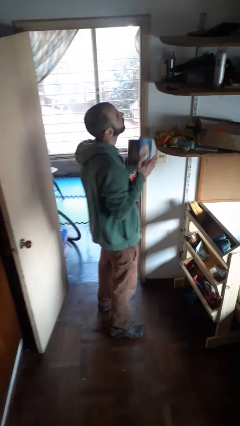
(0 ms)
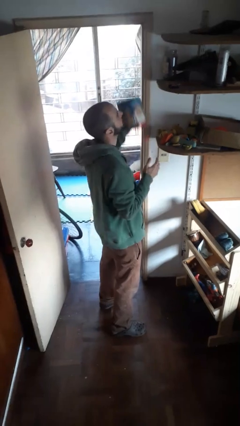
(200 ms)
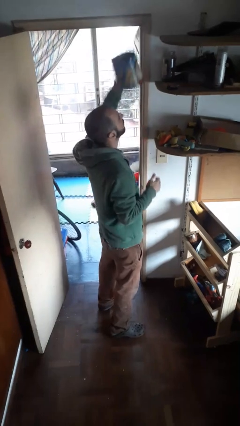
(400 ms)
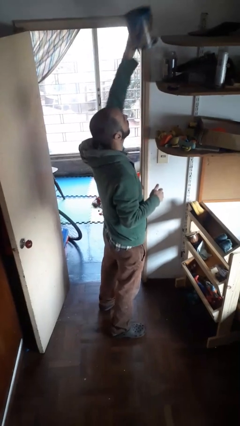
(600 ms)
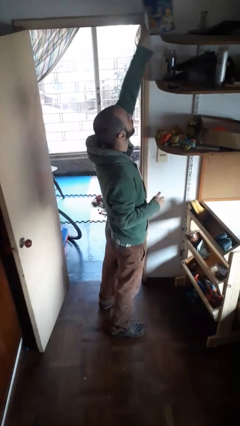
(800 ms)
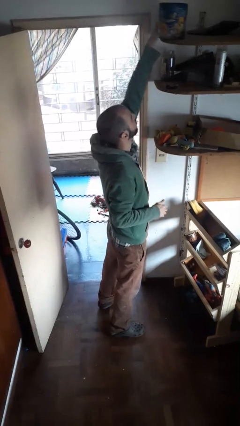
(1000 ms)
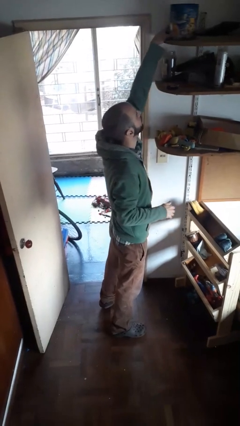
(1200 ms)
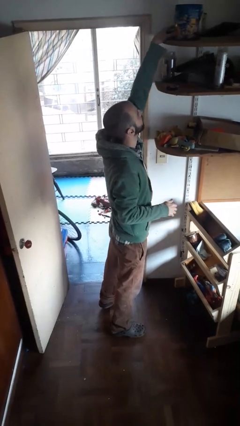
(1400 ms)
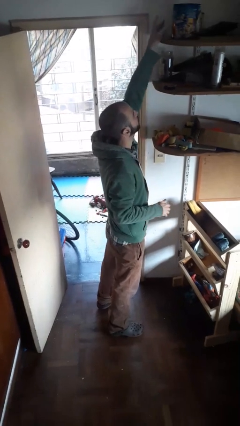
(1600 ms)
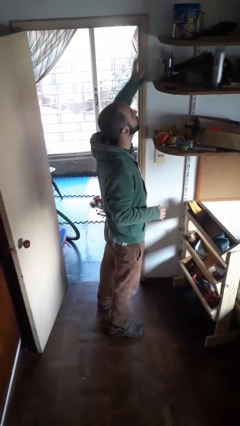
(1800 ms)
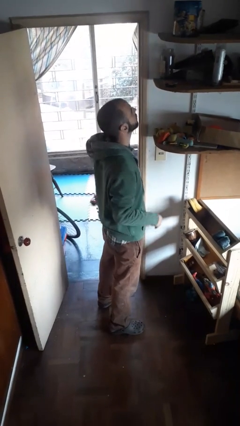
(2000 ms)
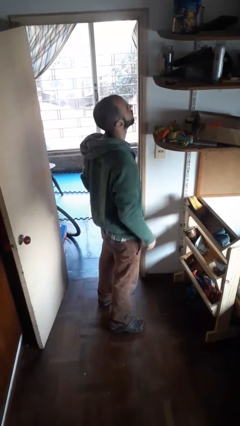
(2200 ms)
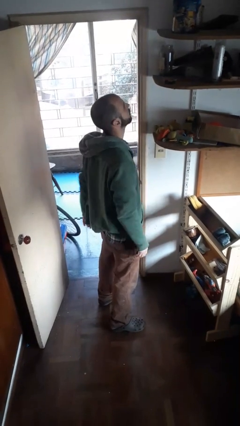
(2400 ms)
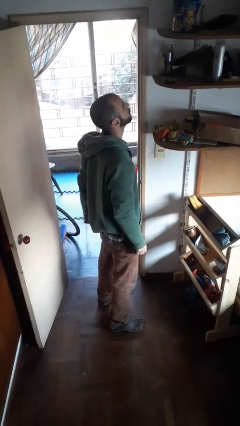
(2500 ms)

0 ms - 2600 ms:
person puts down object on shelf

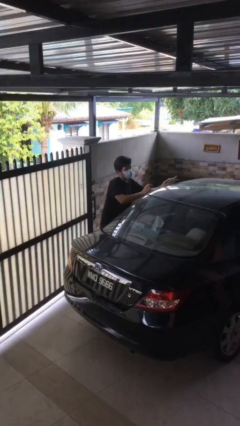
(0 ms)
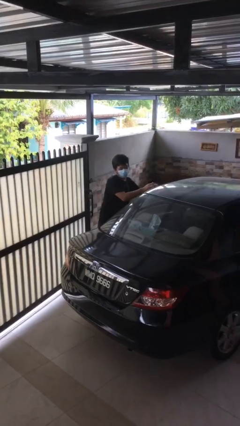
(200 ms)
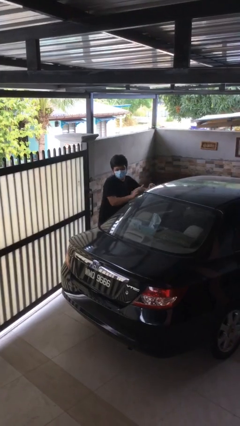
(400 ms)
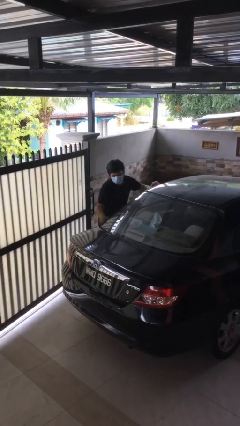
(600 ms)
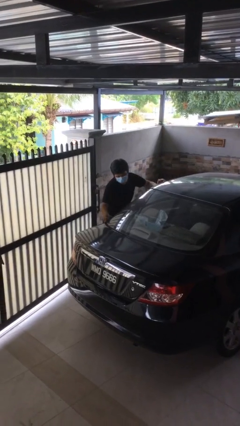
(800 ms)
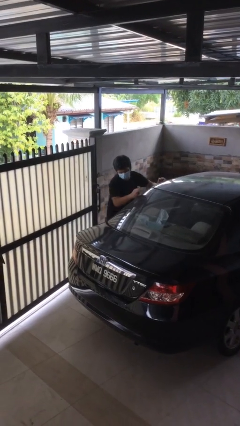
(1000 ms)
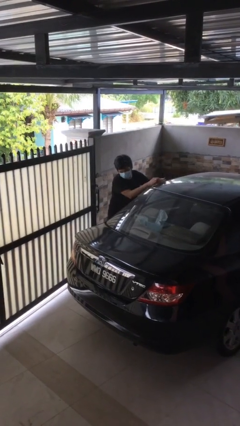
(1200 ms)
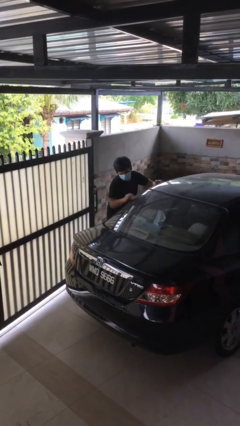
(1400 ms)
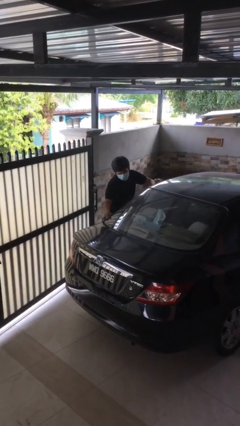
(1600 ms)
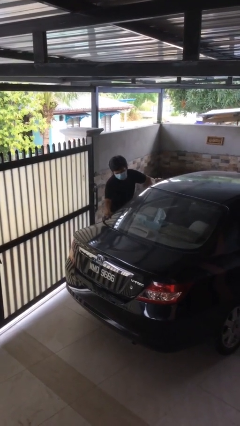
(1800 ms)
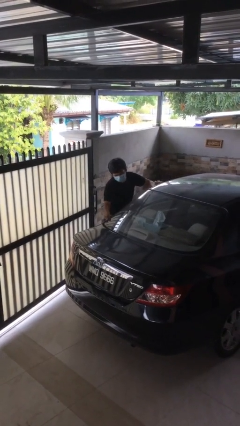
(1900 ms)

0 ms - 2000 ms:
person polishes car with rag

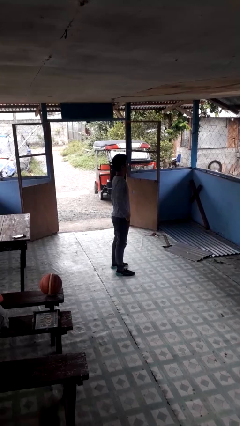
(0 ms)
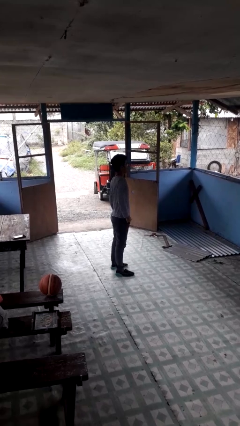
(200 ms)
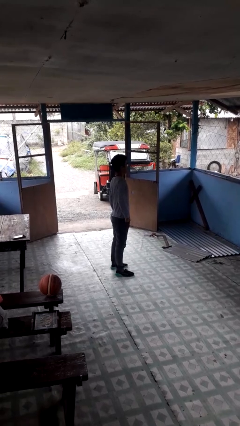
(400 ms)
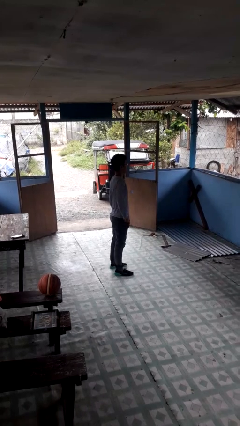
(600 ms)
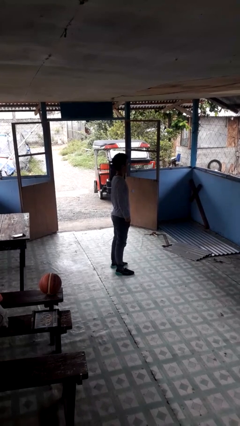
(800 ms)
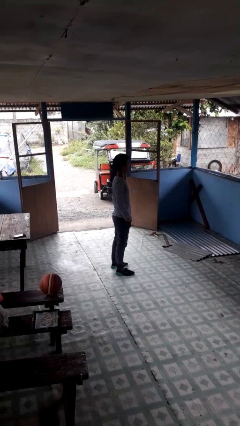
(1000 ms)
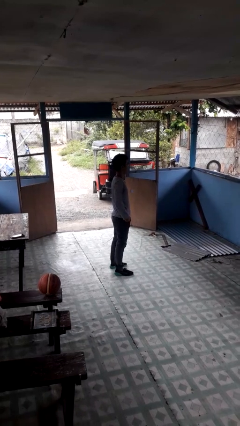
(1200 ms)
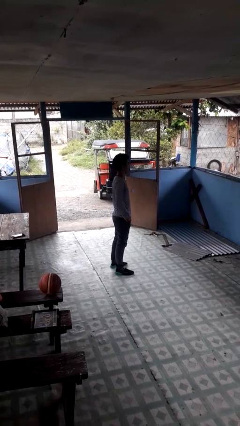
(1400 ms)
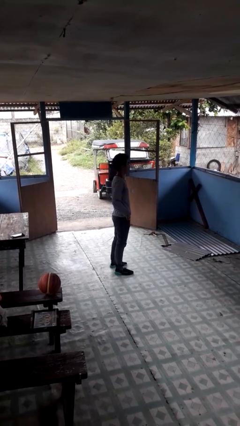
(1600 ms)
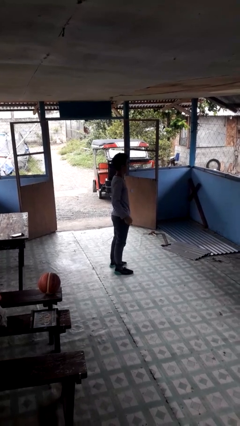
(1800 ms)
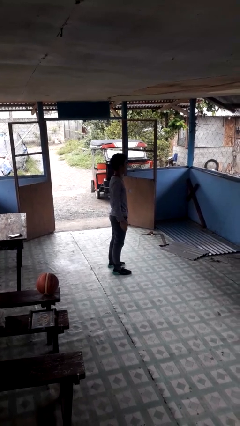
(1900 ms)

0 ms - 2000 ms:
person puts hands in back pockets

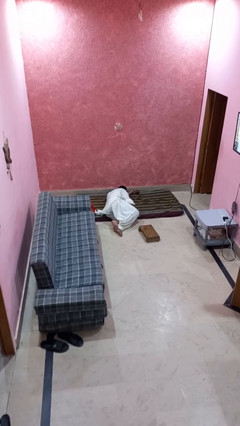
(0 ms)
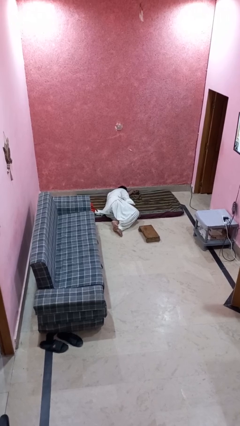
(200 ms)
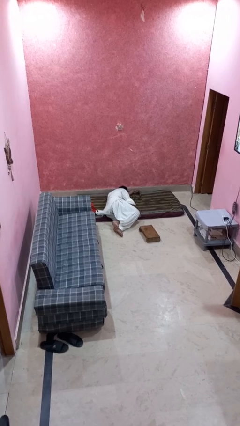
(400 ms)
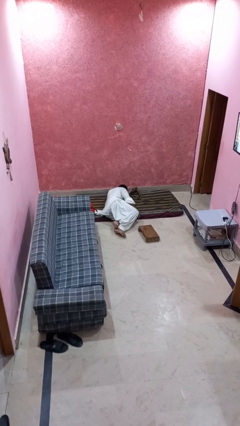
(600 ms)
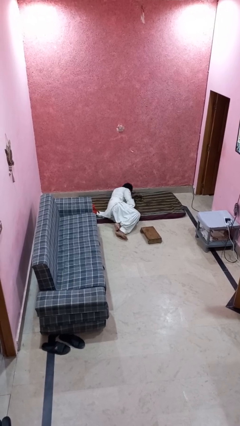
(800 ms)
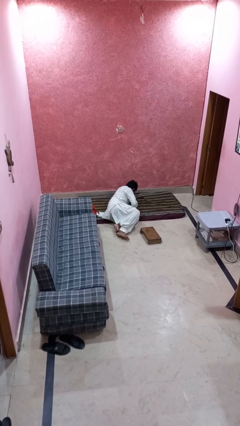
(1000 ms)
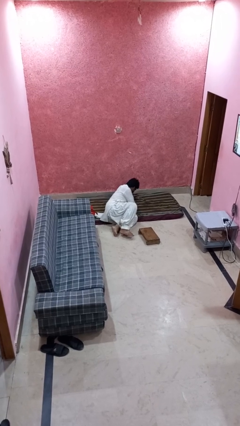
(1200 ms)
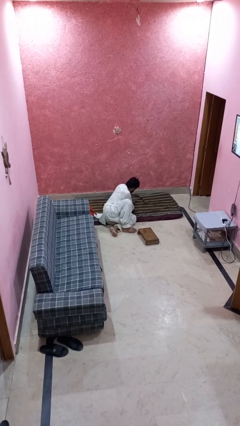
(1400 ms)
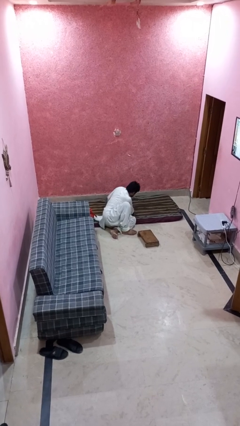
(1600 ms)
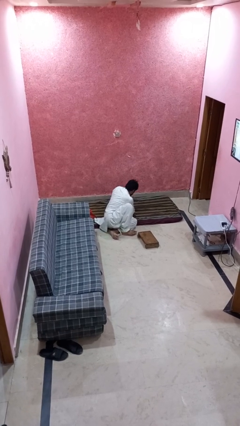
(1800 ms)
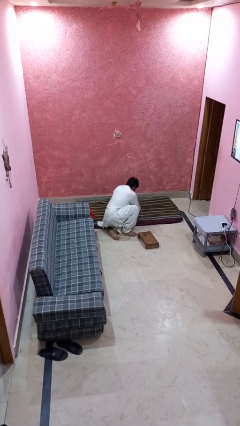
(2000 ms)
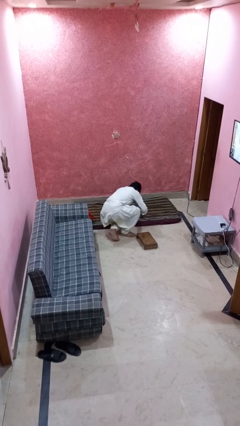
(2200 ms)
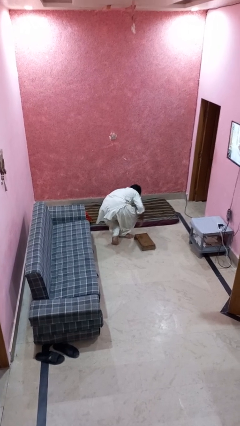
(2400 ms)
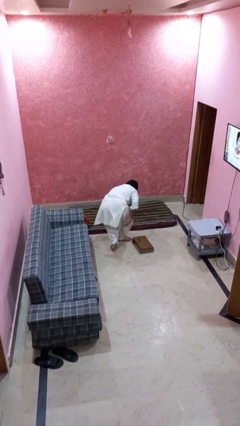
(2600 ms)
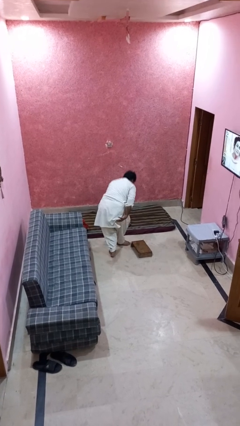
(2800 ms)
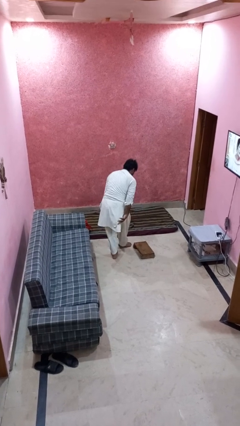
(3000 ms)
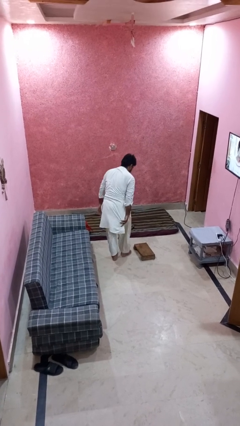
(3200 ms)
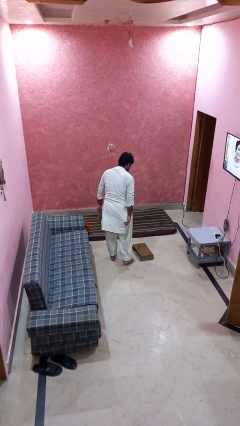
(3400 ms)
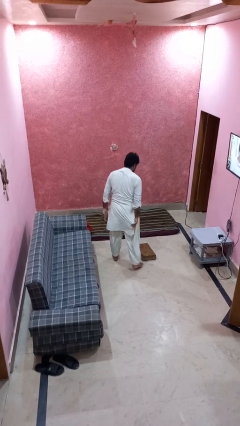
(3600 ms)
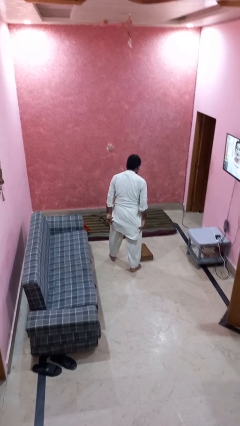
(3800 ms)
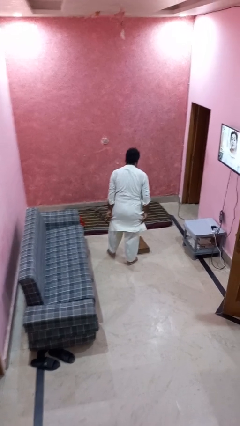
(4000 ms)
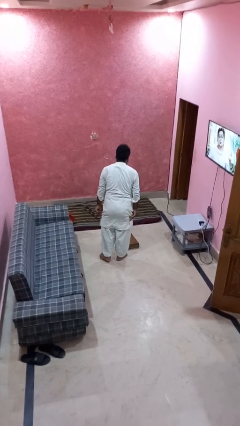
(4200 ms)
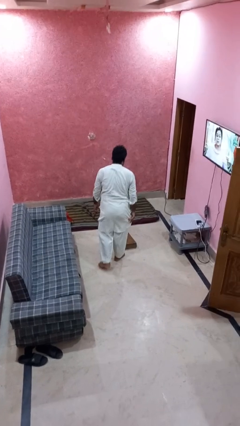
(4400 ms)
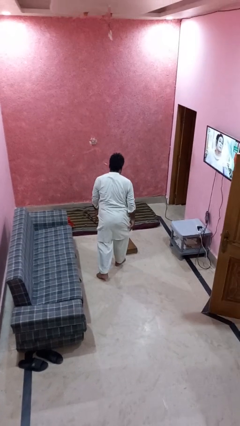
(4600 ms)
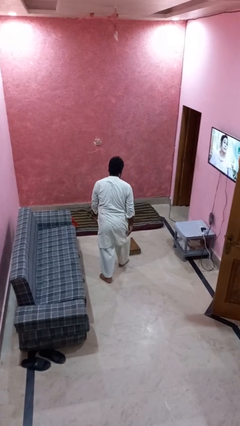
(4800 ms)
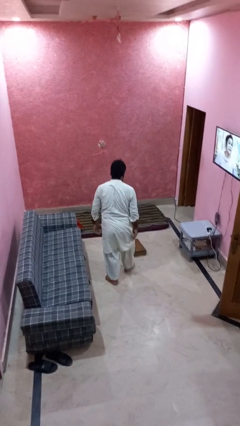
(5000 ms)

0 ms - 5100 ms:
person stands up from floor

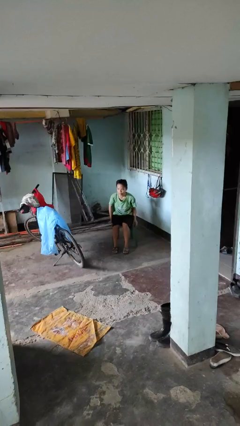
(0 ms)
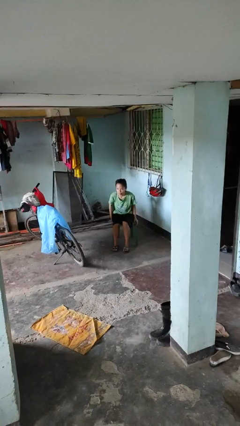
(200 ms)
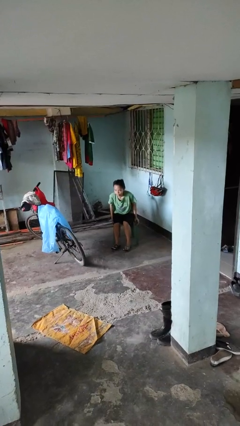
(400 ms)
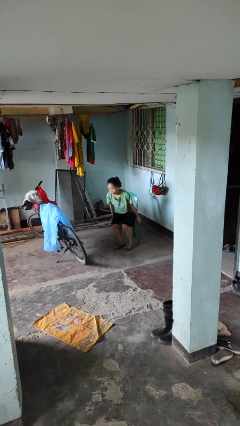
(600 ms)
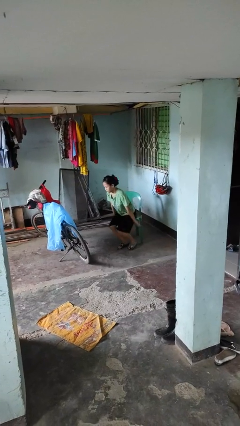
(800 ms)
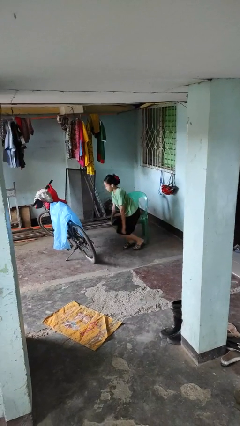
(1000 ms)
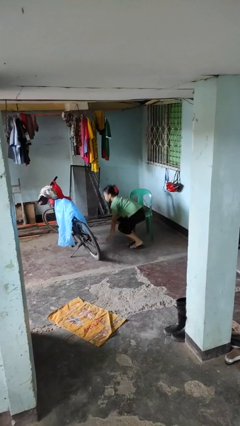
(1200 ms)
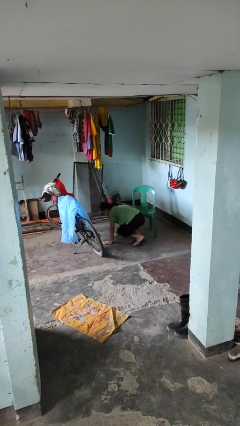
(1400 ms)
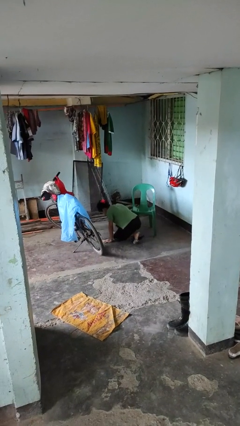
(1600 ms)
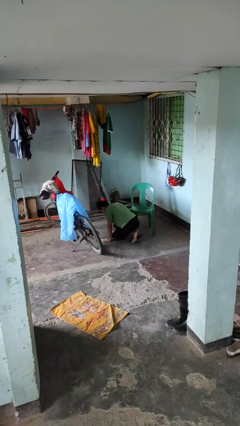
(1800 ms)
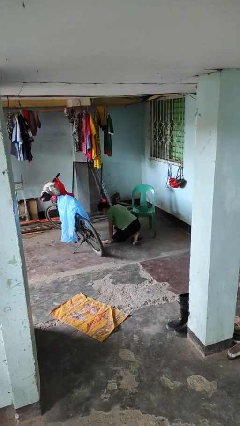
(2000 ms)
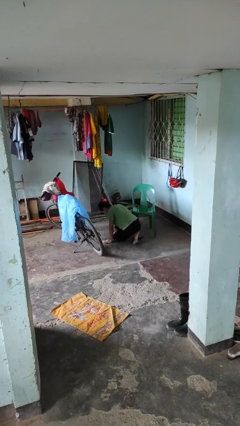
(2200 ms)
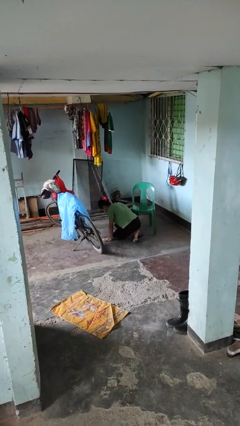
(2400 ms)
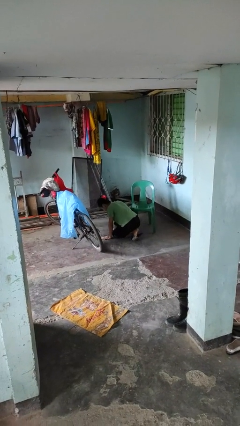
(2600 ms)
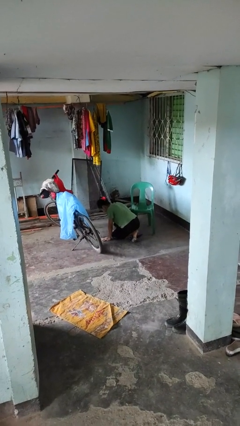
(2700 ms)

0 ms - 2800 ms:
person falls from chair

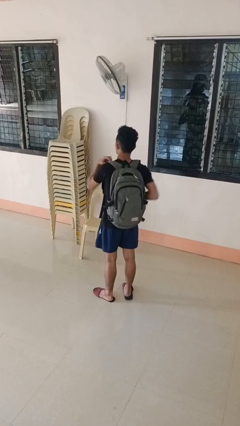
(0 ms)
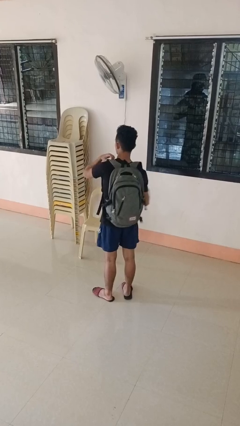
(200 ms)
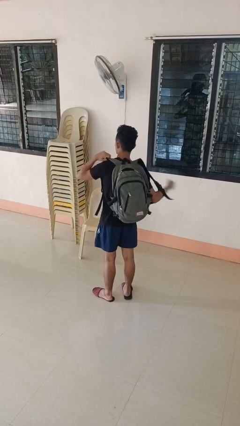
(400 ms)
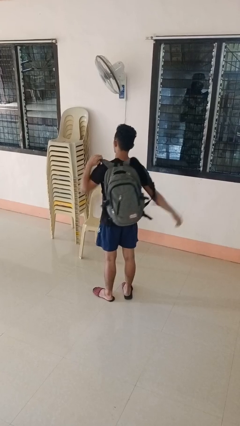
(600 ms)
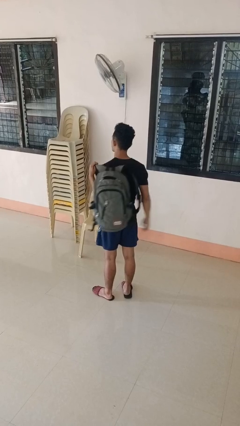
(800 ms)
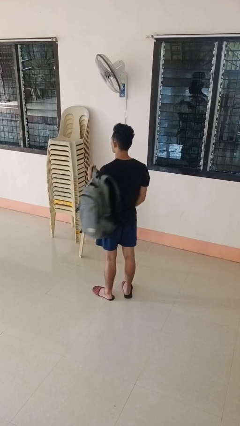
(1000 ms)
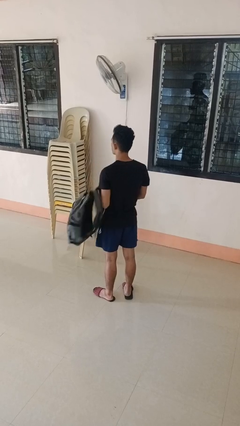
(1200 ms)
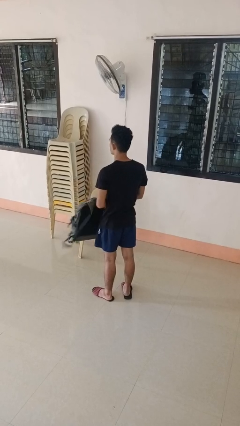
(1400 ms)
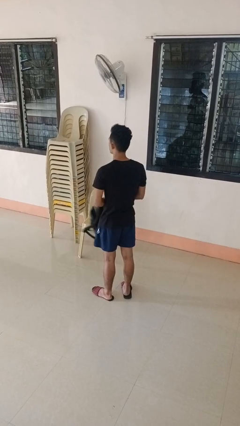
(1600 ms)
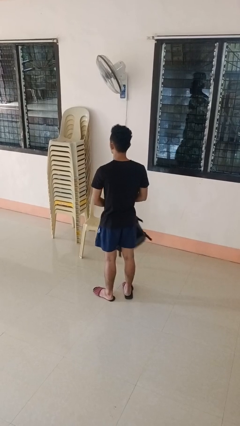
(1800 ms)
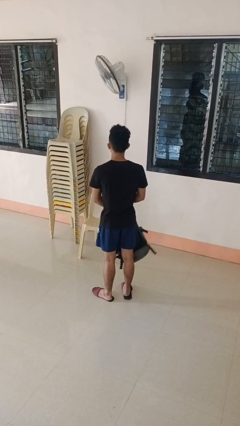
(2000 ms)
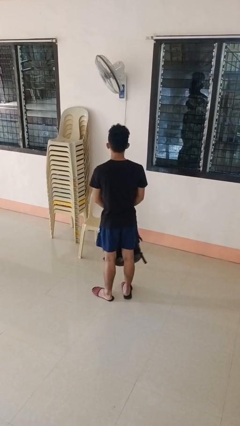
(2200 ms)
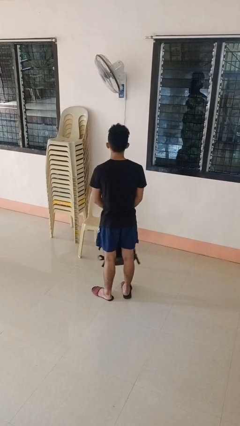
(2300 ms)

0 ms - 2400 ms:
person takes off backpack

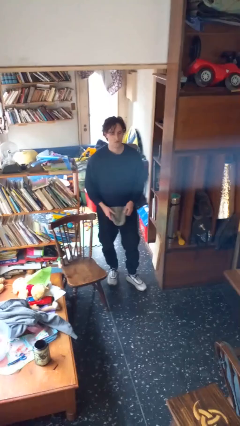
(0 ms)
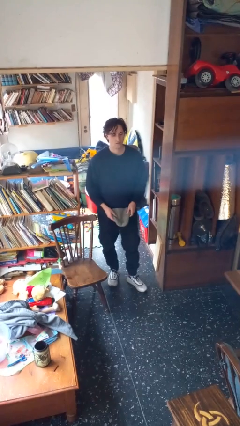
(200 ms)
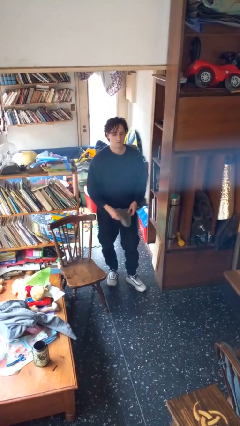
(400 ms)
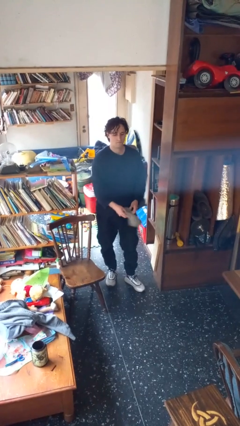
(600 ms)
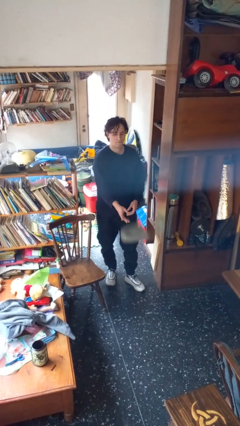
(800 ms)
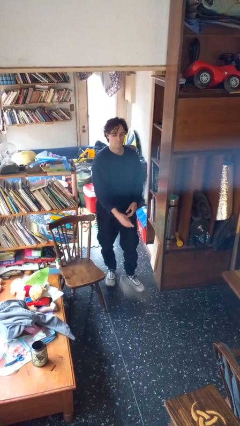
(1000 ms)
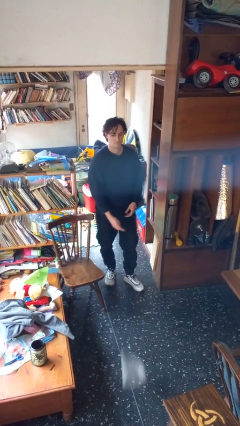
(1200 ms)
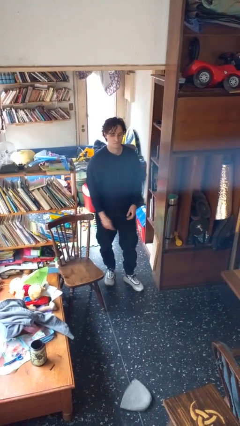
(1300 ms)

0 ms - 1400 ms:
person throws object to ground
